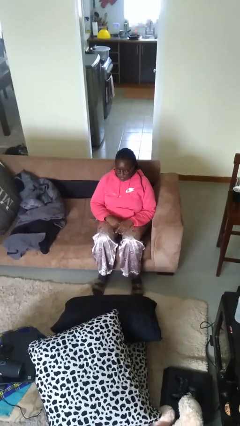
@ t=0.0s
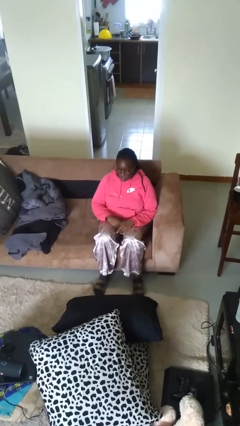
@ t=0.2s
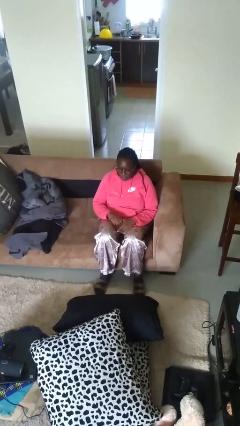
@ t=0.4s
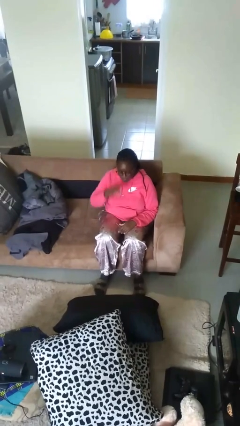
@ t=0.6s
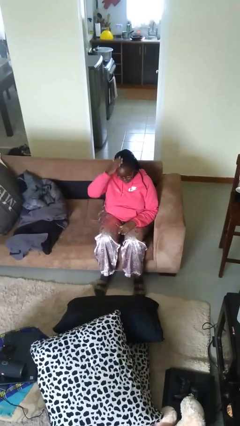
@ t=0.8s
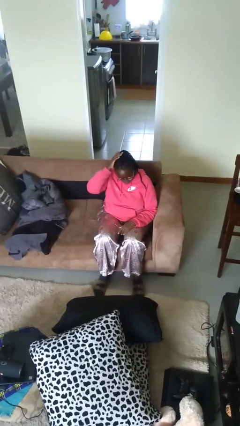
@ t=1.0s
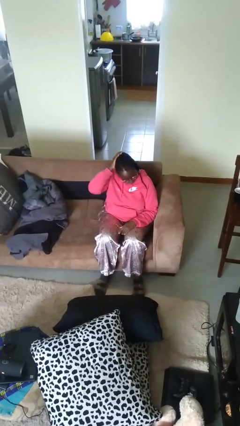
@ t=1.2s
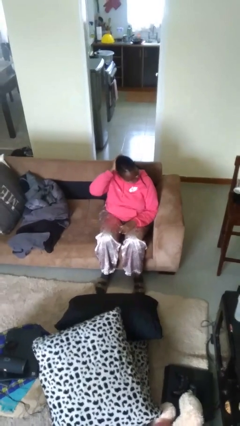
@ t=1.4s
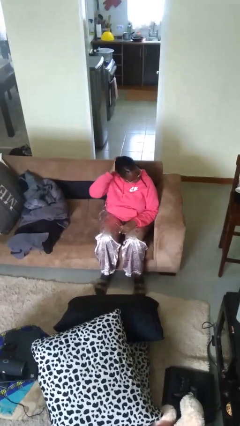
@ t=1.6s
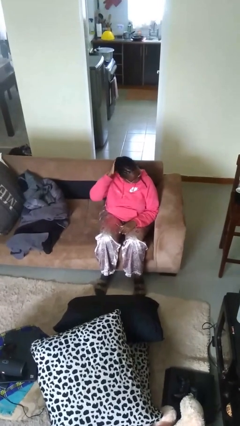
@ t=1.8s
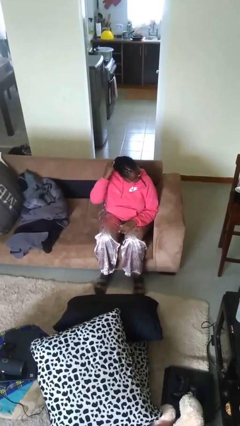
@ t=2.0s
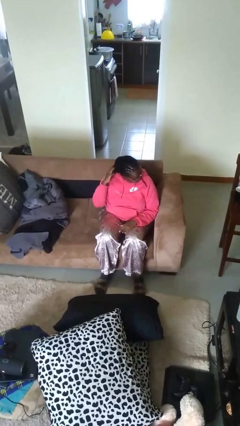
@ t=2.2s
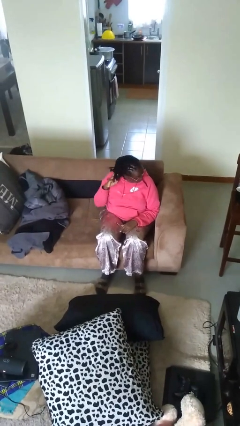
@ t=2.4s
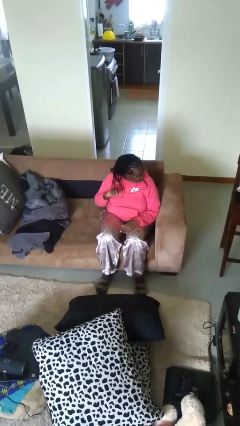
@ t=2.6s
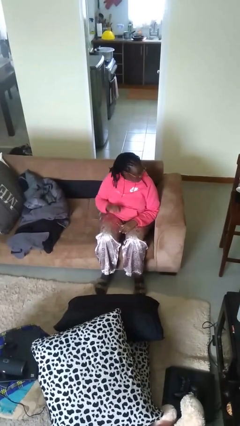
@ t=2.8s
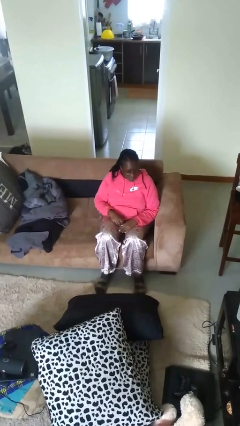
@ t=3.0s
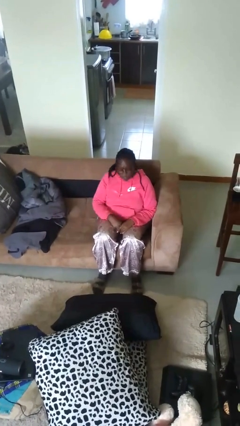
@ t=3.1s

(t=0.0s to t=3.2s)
person strokes hair

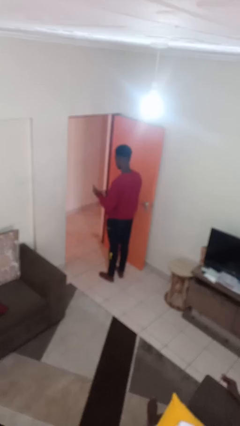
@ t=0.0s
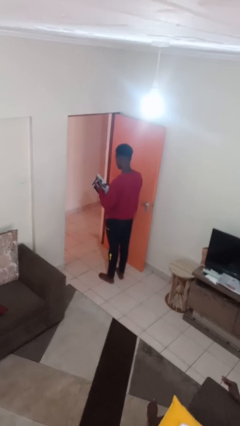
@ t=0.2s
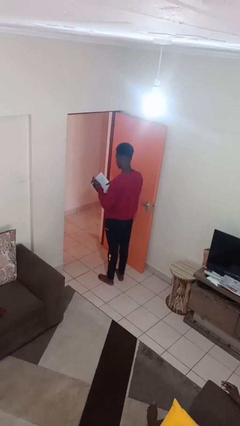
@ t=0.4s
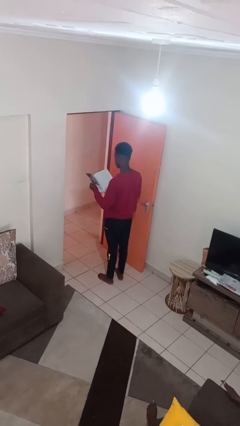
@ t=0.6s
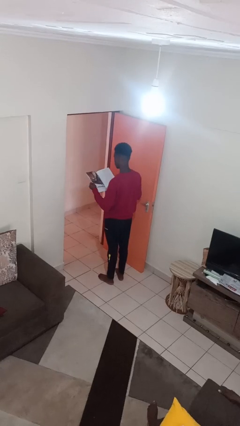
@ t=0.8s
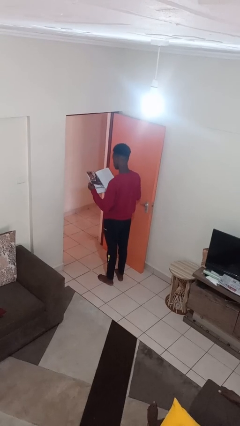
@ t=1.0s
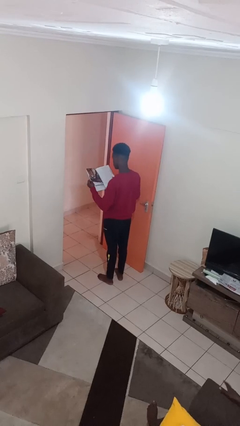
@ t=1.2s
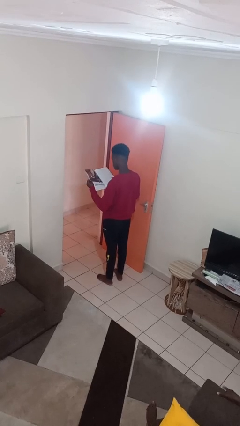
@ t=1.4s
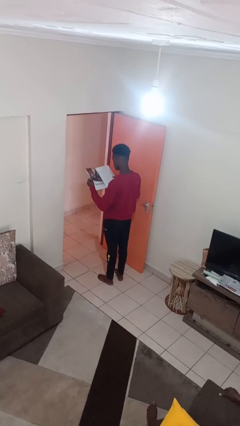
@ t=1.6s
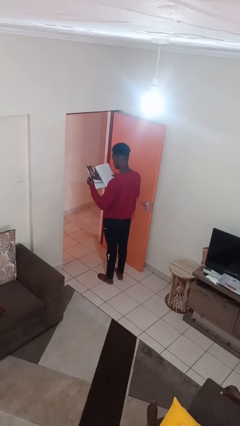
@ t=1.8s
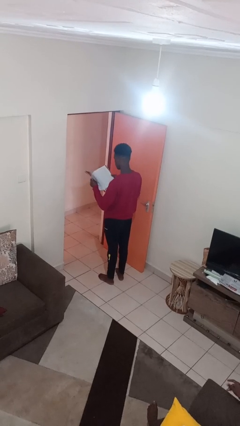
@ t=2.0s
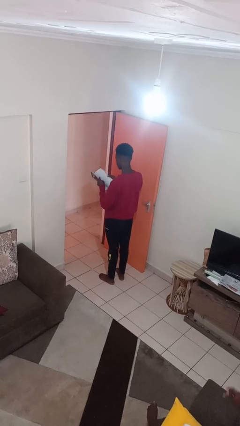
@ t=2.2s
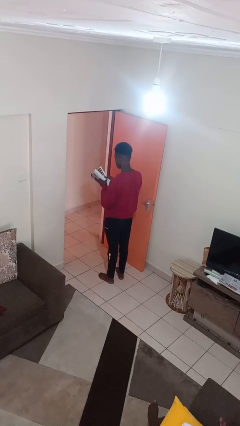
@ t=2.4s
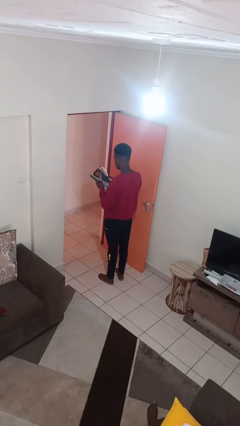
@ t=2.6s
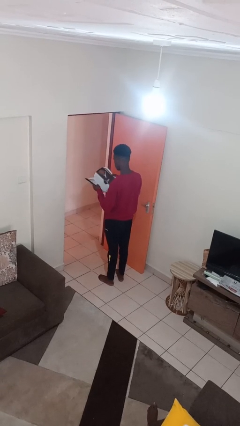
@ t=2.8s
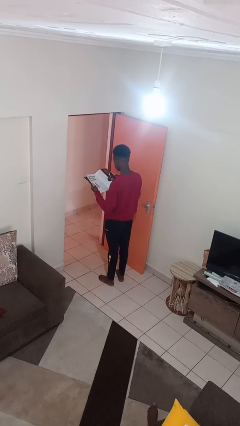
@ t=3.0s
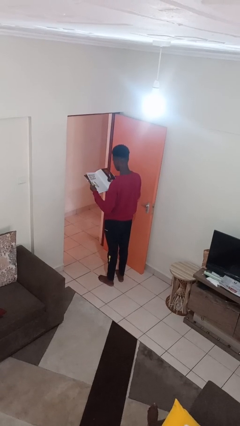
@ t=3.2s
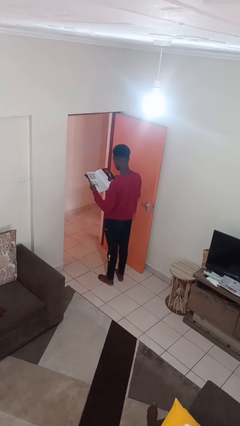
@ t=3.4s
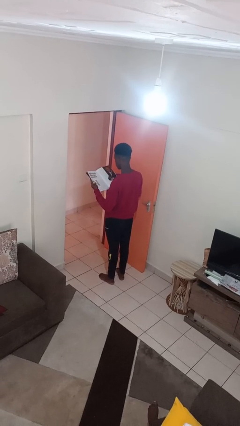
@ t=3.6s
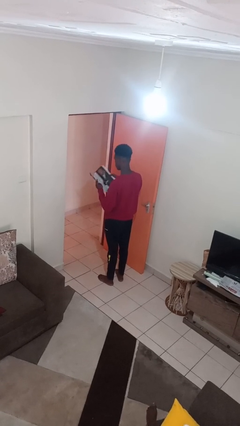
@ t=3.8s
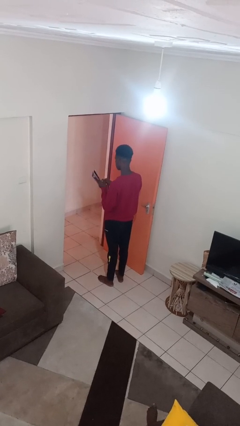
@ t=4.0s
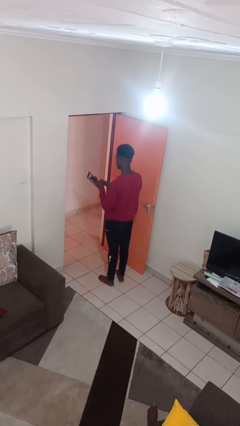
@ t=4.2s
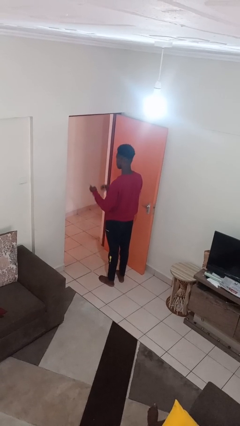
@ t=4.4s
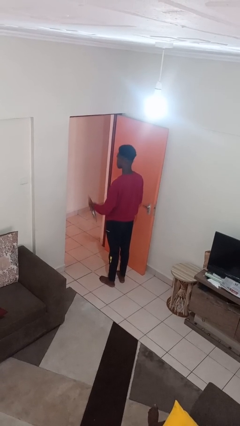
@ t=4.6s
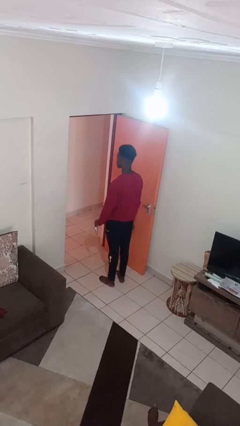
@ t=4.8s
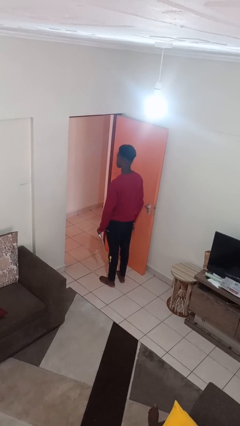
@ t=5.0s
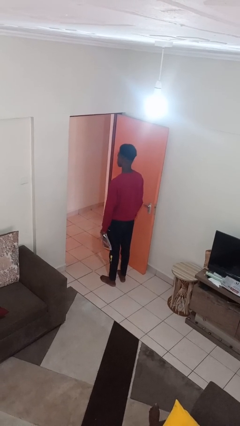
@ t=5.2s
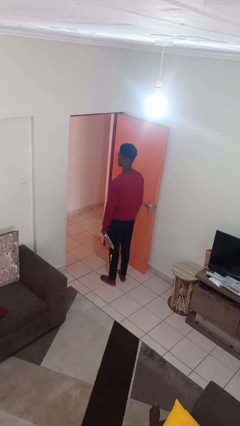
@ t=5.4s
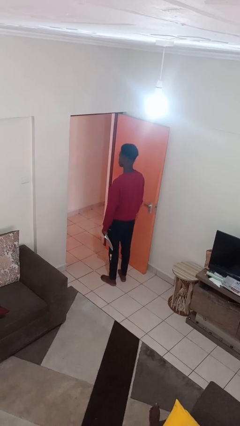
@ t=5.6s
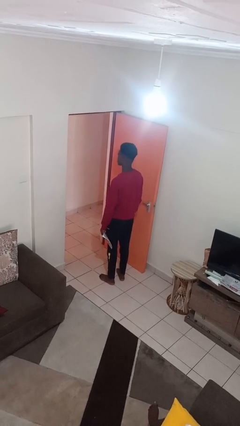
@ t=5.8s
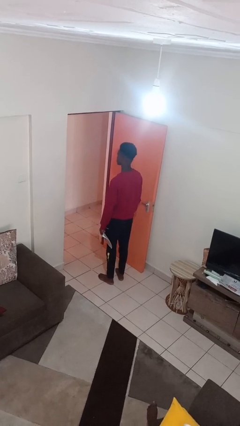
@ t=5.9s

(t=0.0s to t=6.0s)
person reads magazine

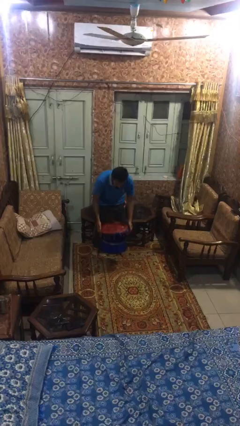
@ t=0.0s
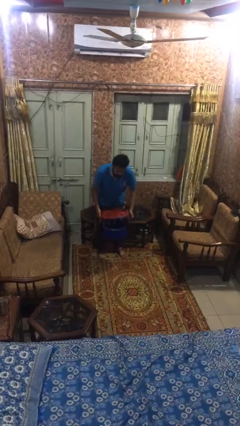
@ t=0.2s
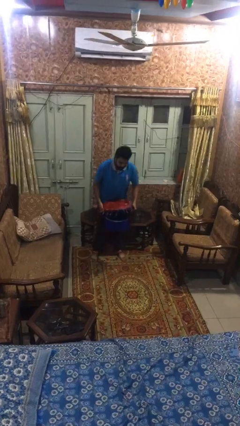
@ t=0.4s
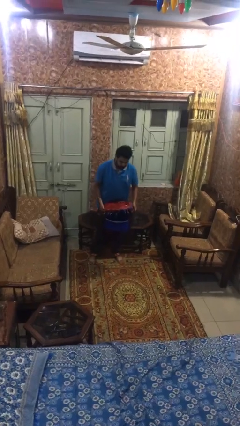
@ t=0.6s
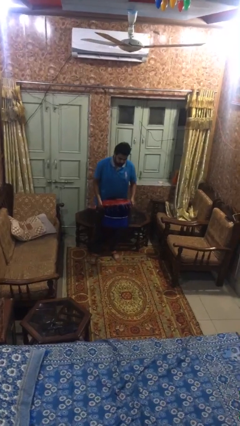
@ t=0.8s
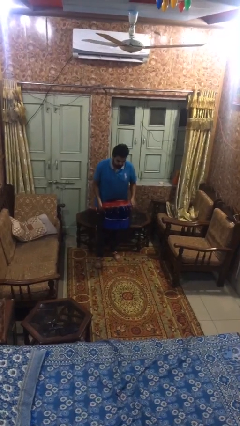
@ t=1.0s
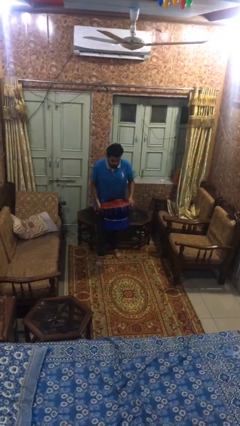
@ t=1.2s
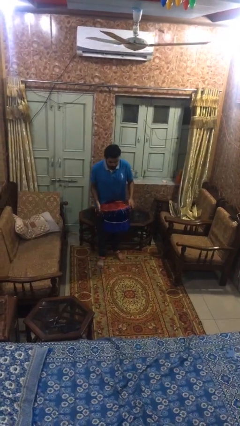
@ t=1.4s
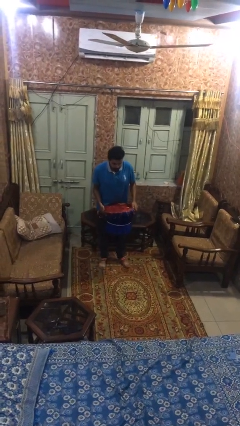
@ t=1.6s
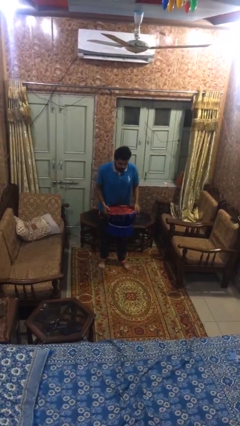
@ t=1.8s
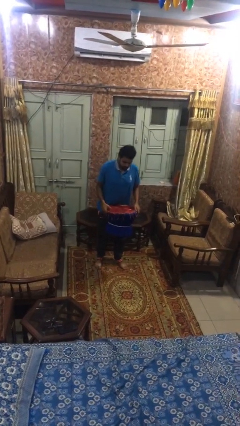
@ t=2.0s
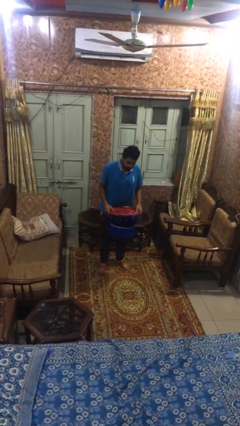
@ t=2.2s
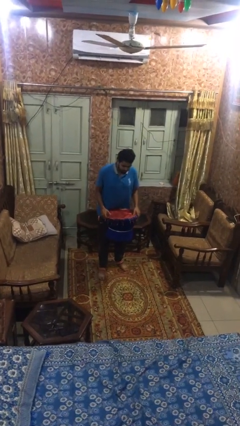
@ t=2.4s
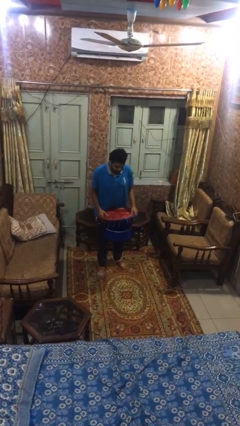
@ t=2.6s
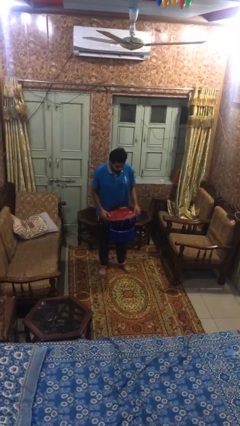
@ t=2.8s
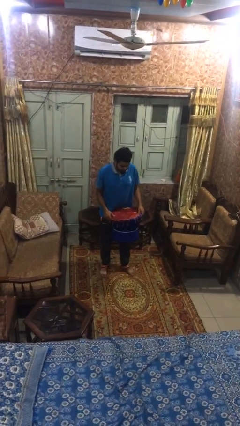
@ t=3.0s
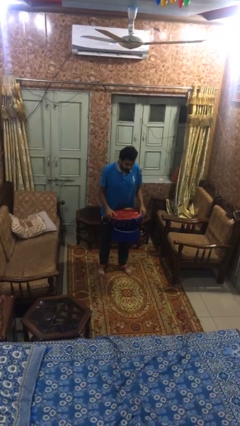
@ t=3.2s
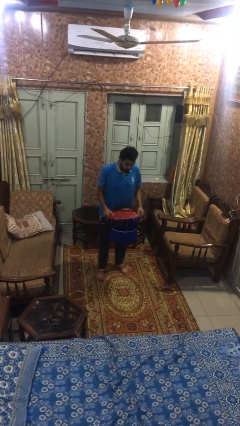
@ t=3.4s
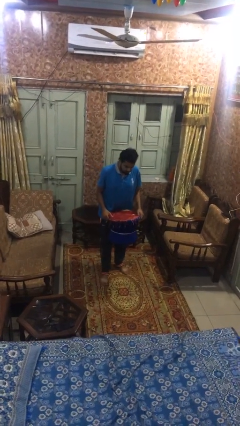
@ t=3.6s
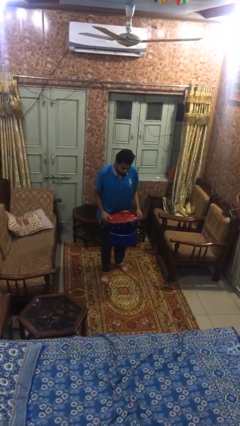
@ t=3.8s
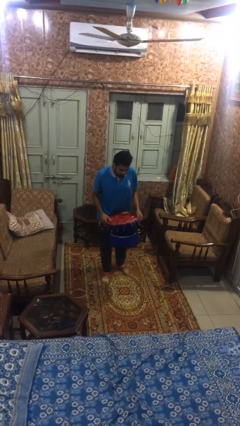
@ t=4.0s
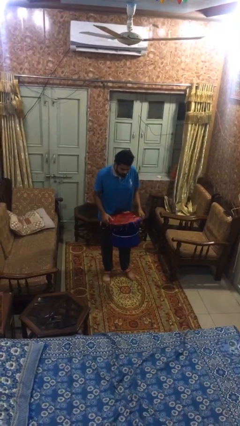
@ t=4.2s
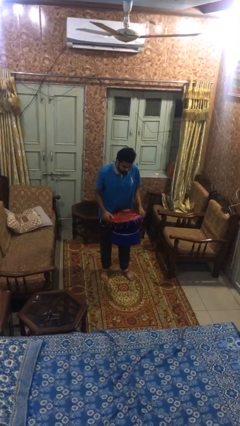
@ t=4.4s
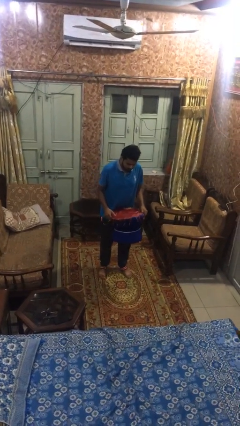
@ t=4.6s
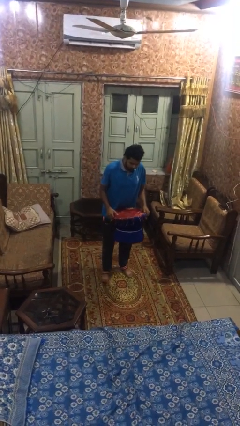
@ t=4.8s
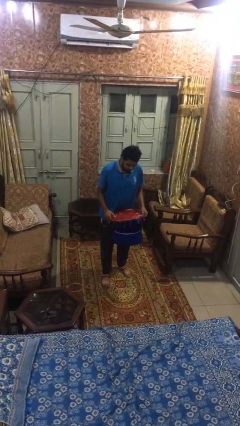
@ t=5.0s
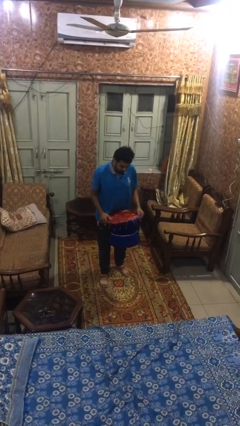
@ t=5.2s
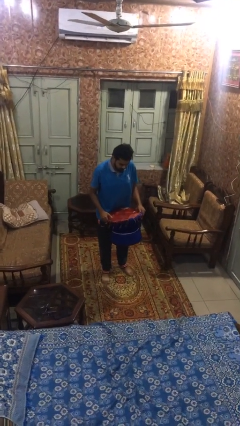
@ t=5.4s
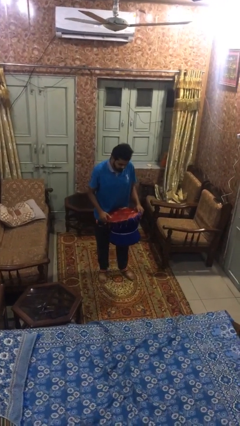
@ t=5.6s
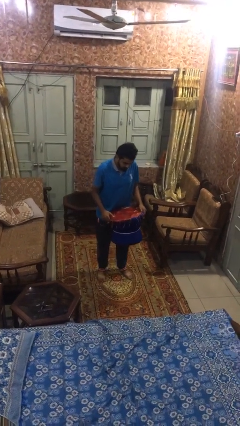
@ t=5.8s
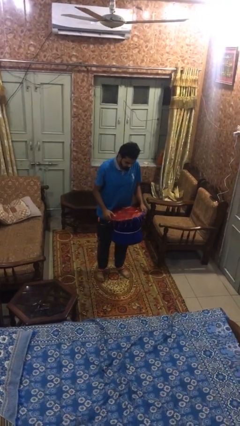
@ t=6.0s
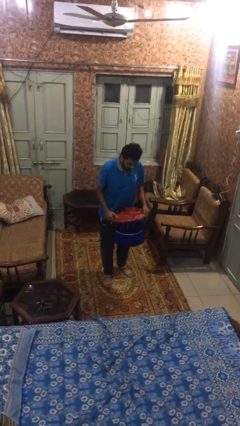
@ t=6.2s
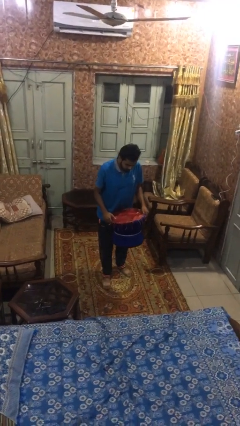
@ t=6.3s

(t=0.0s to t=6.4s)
person carries heavy object

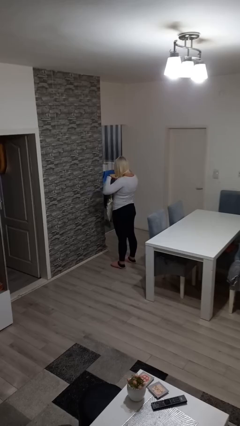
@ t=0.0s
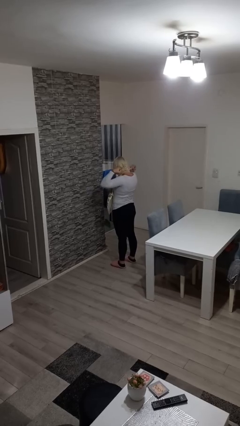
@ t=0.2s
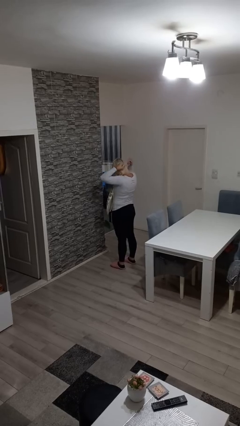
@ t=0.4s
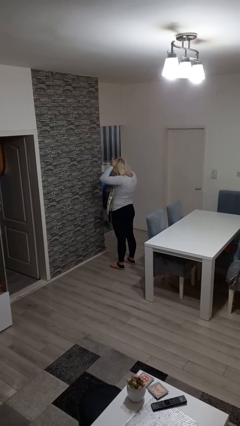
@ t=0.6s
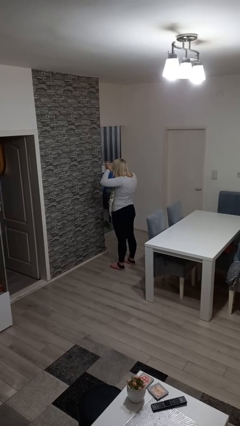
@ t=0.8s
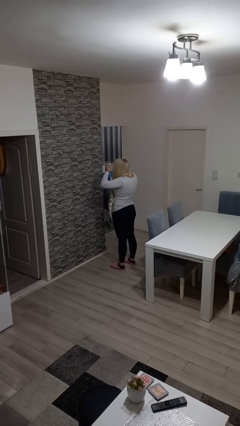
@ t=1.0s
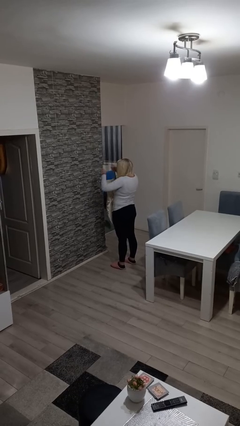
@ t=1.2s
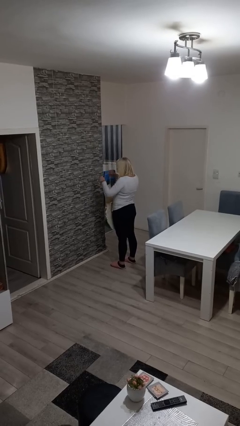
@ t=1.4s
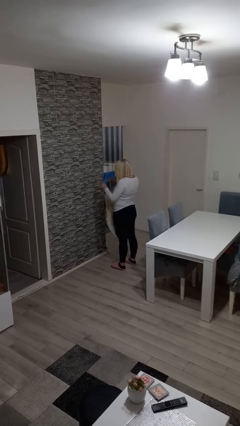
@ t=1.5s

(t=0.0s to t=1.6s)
person takes off apron

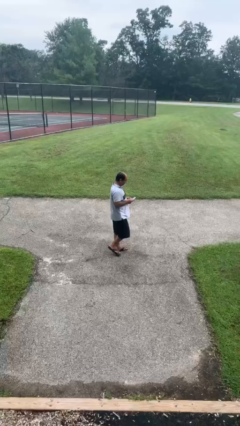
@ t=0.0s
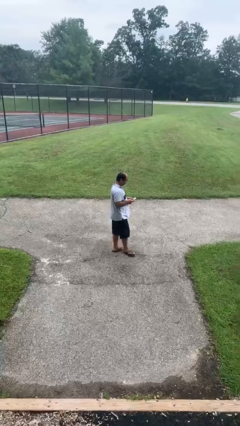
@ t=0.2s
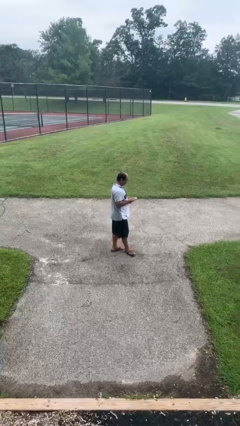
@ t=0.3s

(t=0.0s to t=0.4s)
person texts on phone
